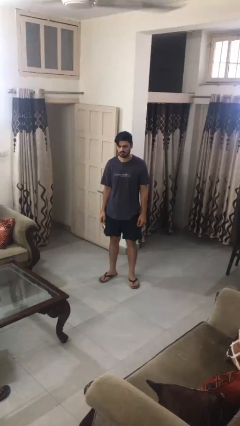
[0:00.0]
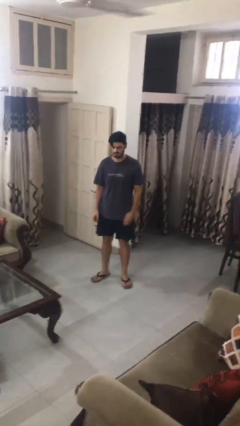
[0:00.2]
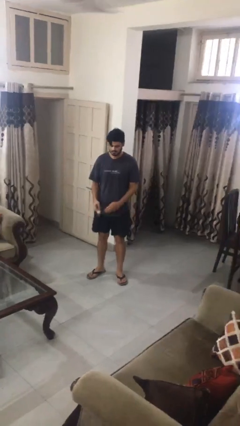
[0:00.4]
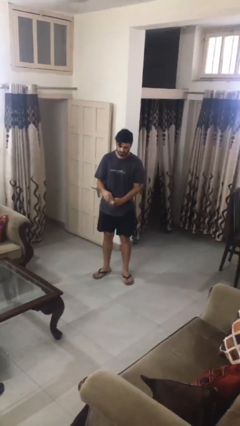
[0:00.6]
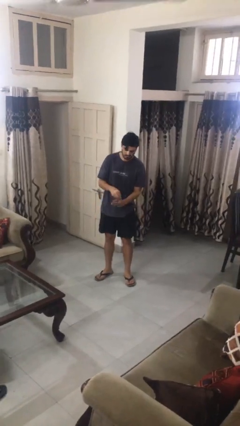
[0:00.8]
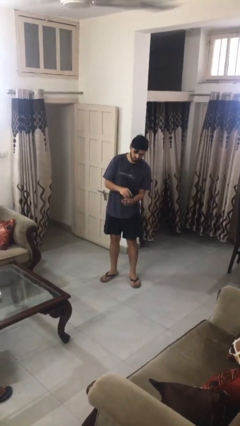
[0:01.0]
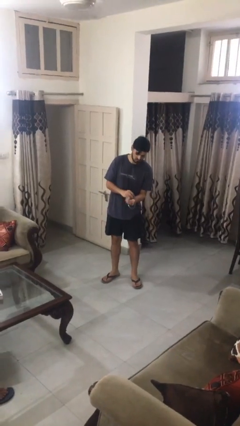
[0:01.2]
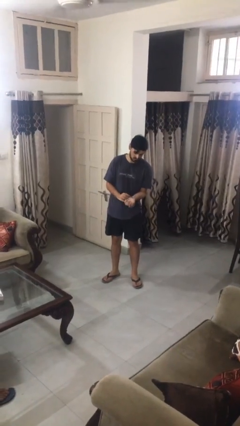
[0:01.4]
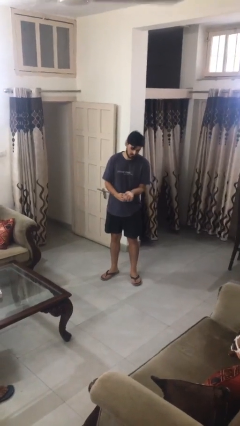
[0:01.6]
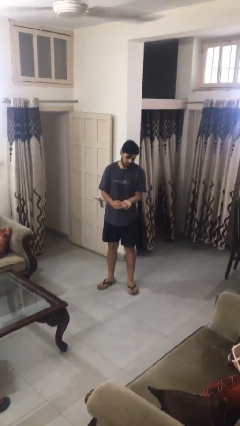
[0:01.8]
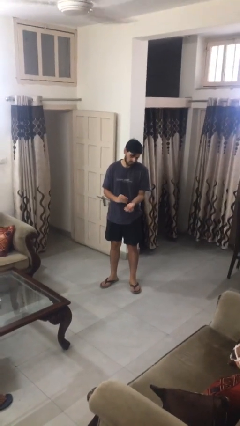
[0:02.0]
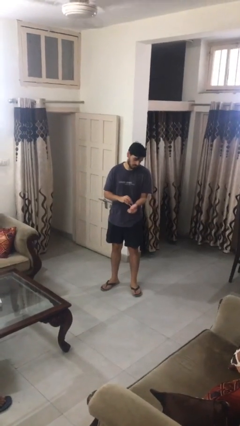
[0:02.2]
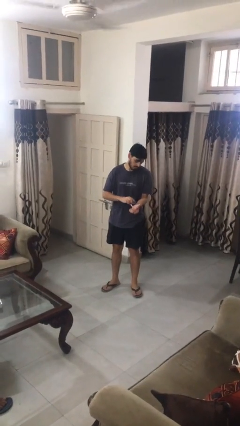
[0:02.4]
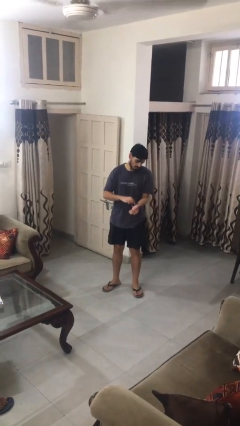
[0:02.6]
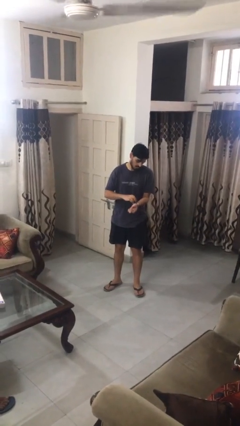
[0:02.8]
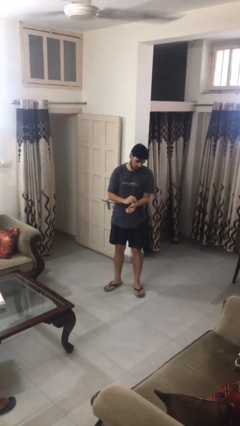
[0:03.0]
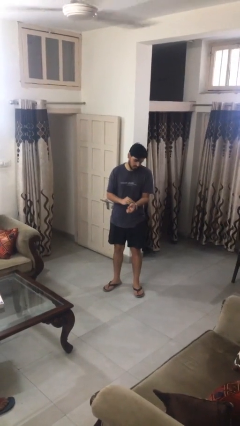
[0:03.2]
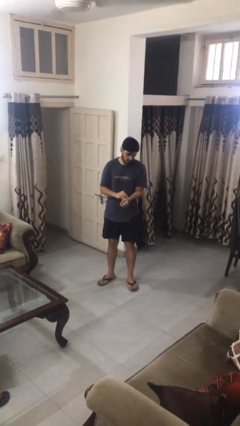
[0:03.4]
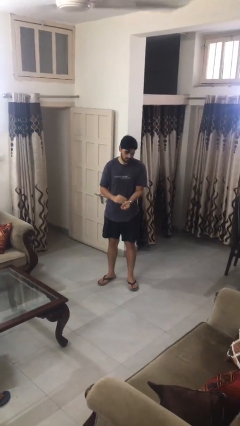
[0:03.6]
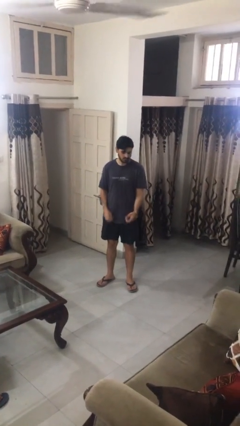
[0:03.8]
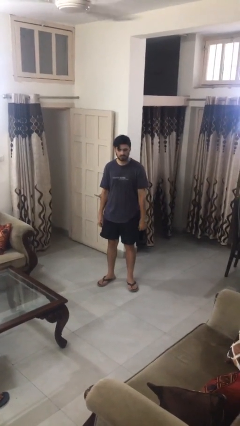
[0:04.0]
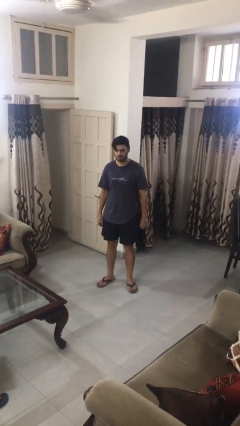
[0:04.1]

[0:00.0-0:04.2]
person puts on wristwatch

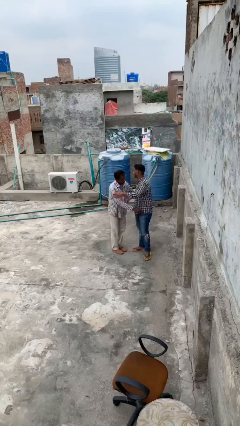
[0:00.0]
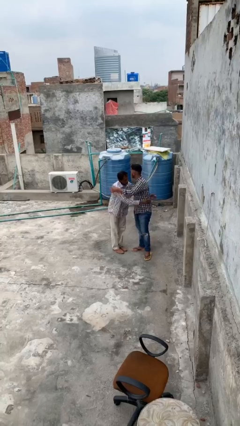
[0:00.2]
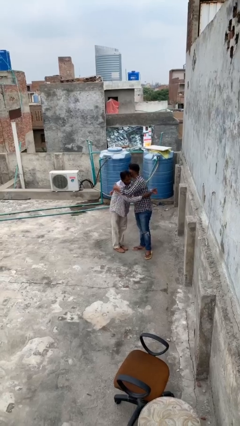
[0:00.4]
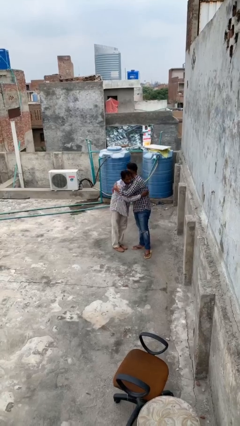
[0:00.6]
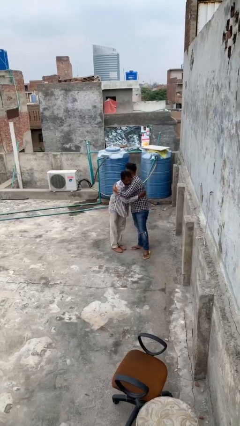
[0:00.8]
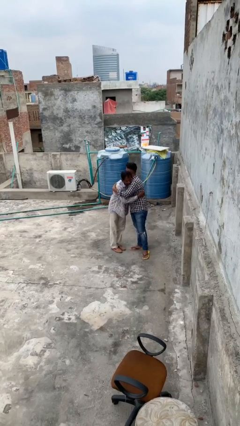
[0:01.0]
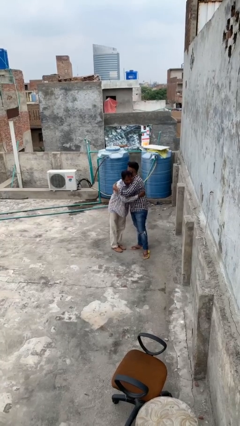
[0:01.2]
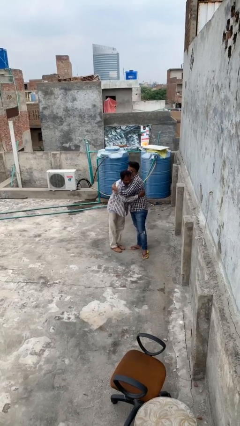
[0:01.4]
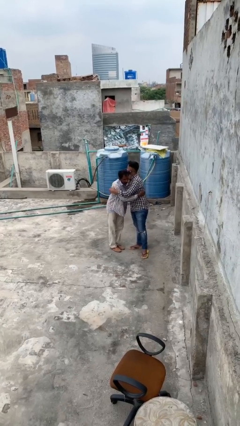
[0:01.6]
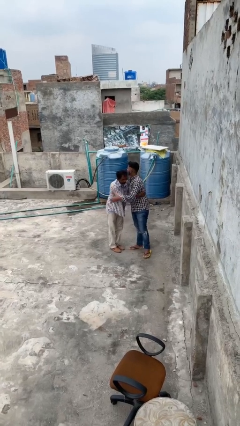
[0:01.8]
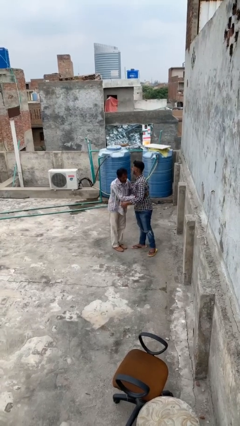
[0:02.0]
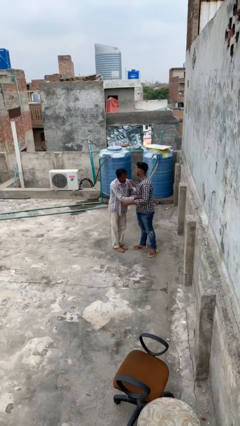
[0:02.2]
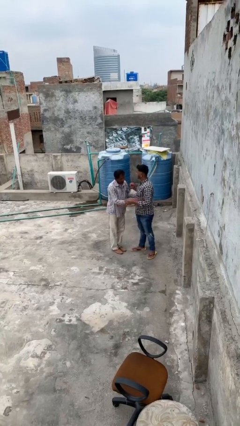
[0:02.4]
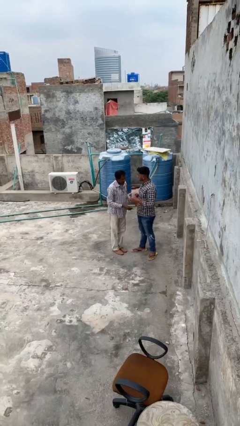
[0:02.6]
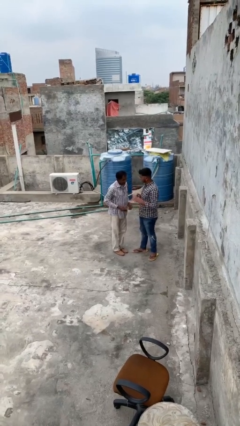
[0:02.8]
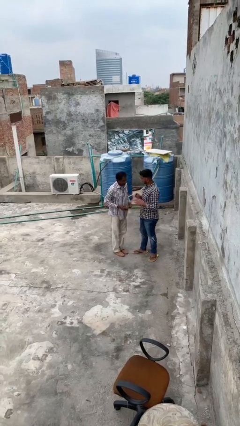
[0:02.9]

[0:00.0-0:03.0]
person embraces person

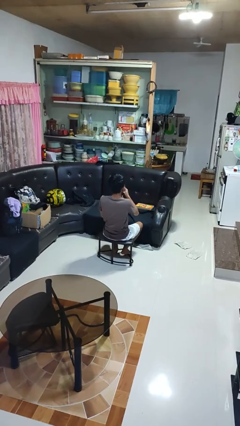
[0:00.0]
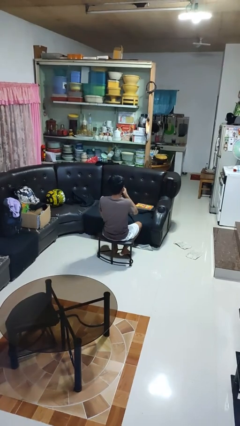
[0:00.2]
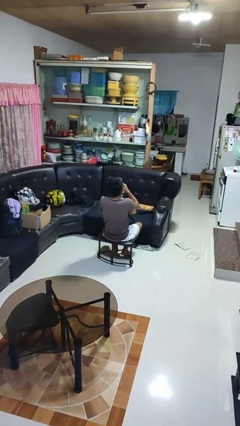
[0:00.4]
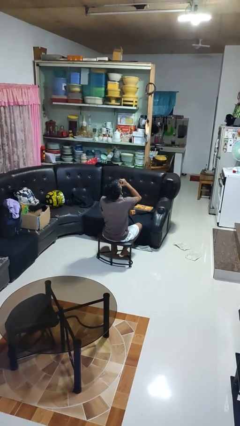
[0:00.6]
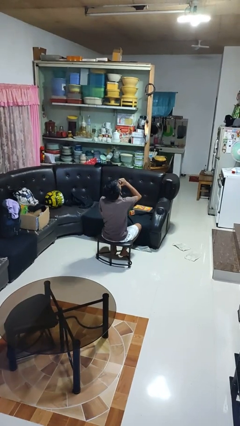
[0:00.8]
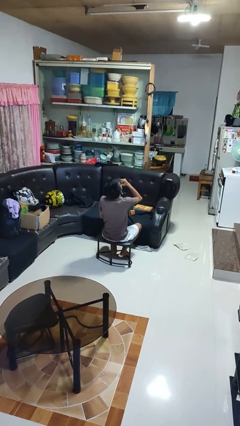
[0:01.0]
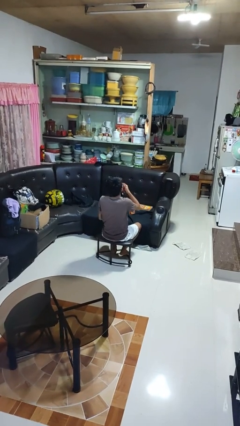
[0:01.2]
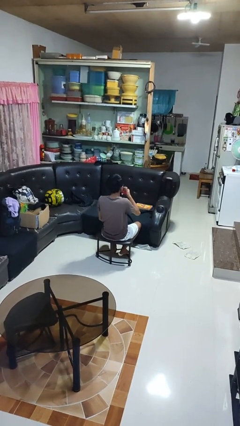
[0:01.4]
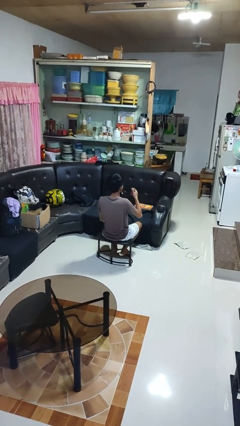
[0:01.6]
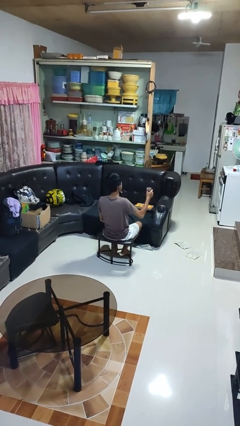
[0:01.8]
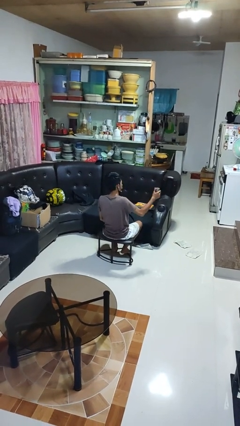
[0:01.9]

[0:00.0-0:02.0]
person drinks from beverage can

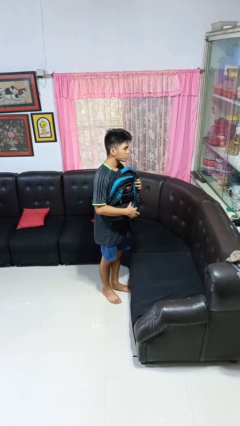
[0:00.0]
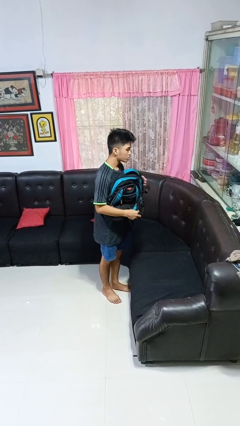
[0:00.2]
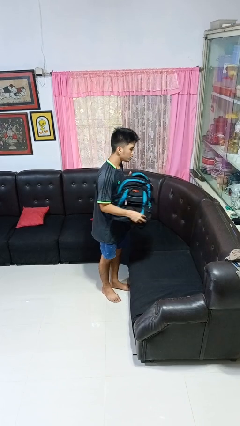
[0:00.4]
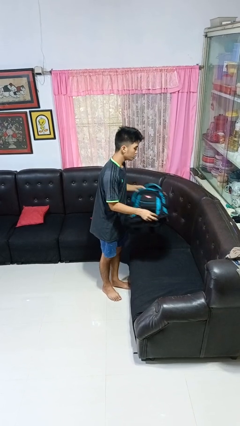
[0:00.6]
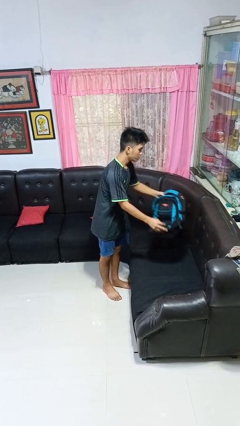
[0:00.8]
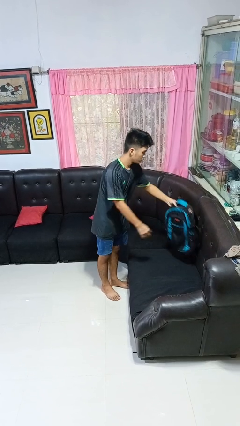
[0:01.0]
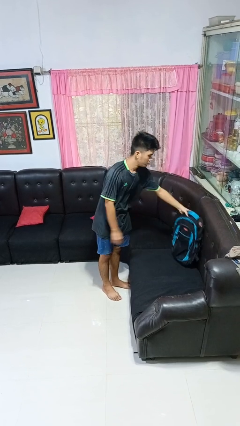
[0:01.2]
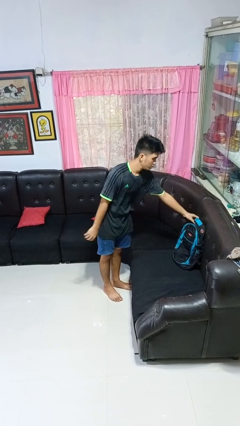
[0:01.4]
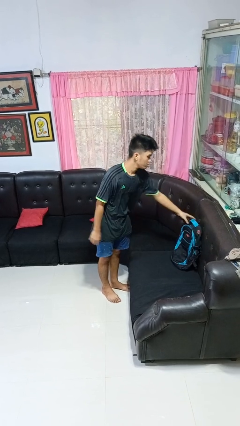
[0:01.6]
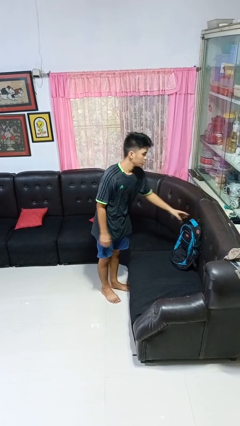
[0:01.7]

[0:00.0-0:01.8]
person puts down object on couch

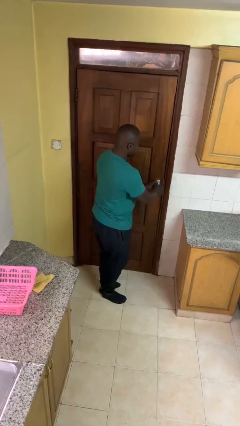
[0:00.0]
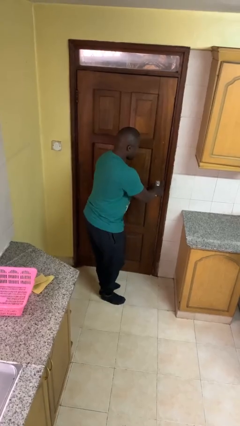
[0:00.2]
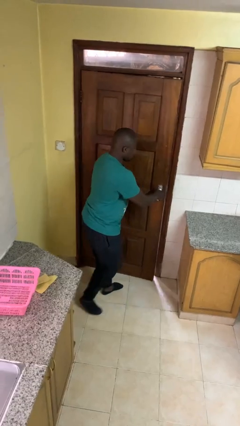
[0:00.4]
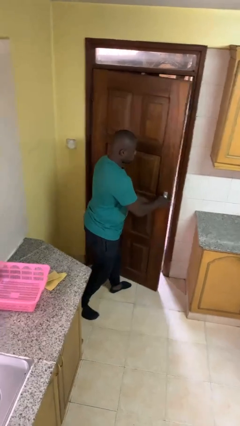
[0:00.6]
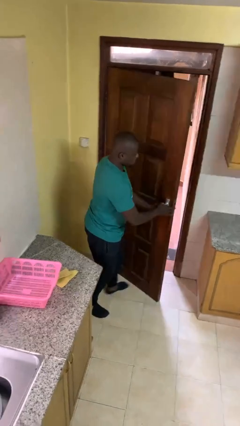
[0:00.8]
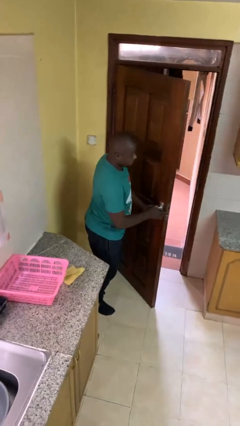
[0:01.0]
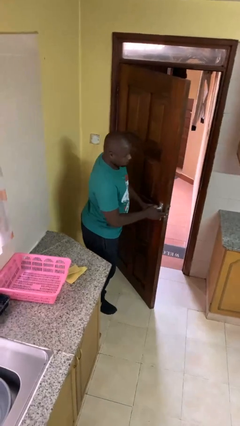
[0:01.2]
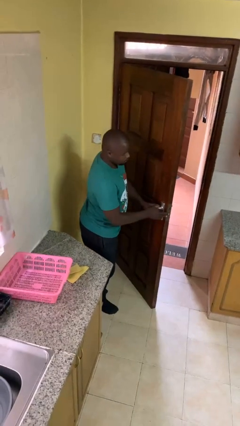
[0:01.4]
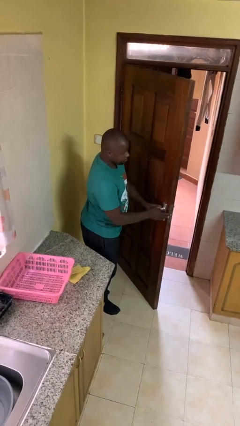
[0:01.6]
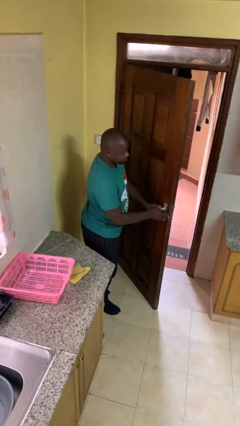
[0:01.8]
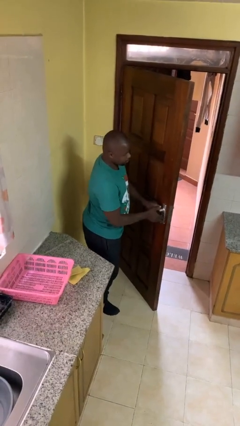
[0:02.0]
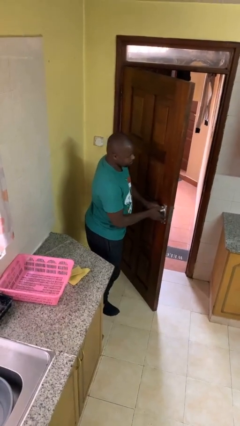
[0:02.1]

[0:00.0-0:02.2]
person opens facility door

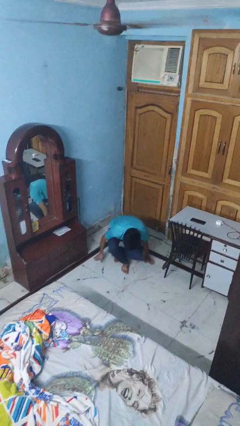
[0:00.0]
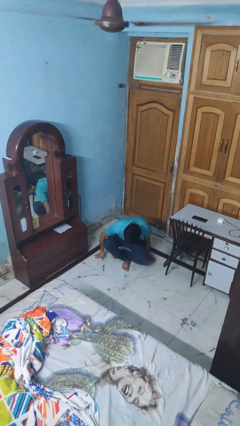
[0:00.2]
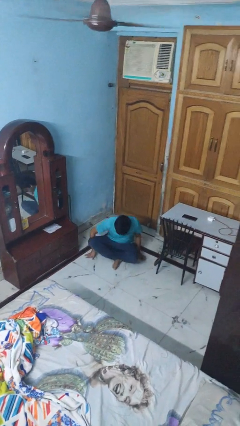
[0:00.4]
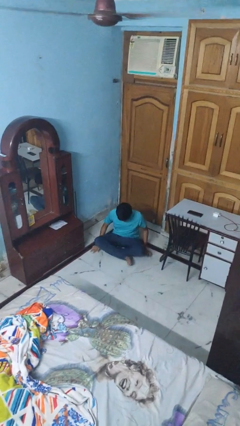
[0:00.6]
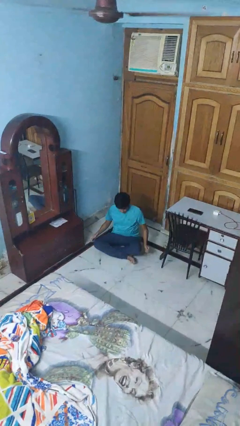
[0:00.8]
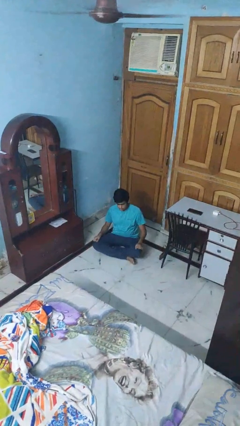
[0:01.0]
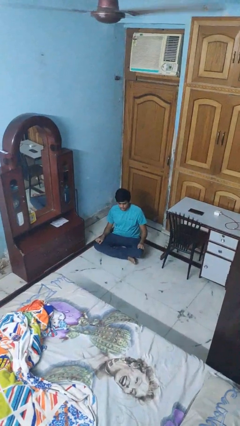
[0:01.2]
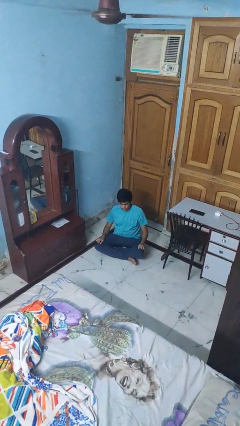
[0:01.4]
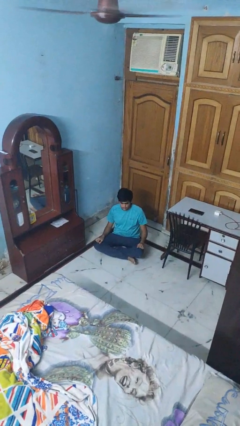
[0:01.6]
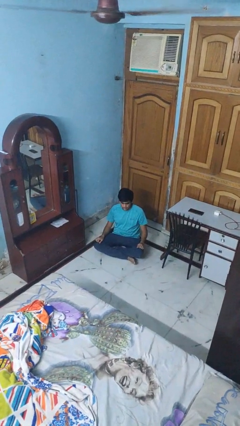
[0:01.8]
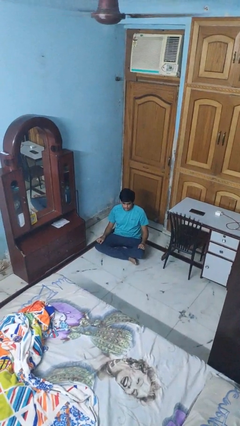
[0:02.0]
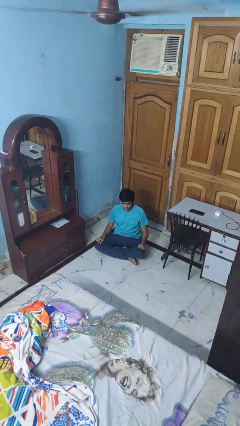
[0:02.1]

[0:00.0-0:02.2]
person sits crisscross

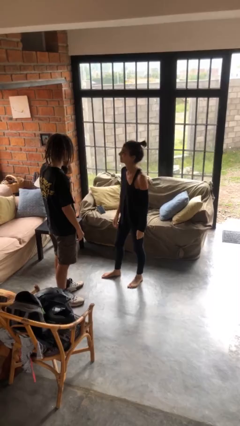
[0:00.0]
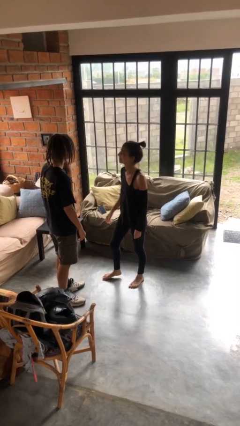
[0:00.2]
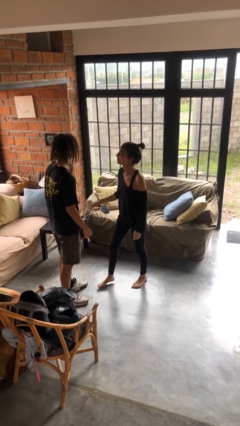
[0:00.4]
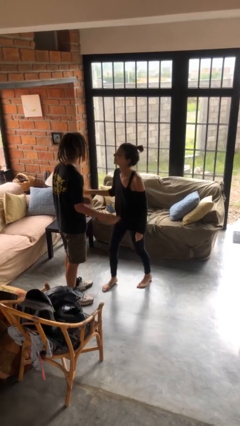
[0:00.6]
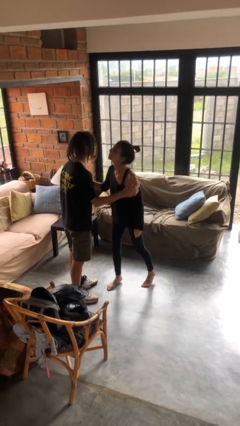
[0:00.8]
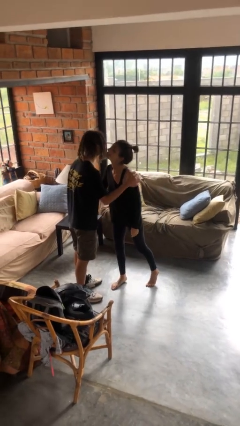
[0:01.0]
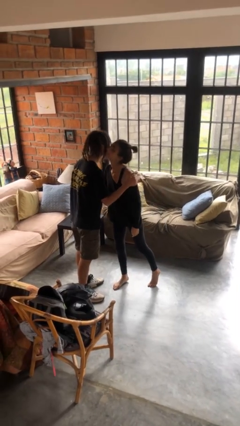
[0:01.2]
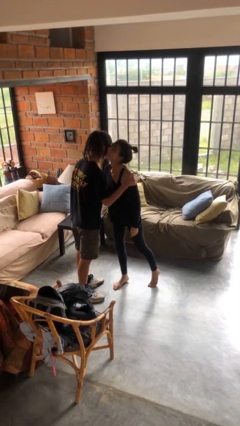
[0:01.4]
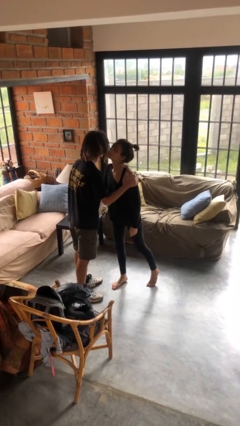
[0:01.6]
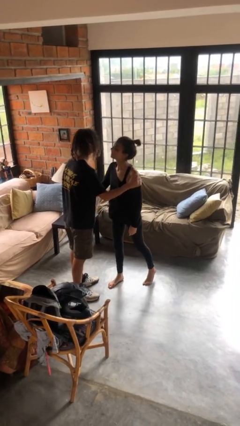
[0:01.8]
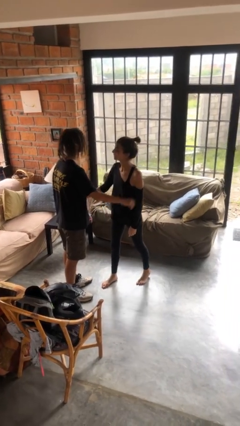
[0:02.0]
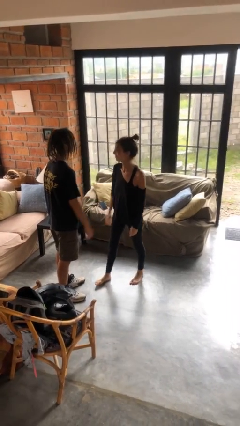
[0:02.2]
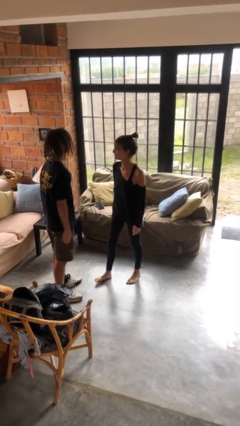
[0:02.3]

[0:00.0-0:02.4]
person kisses cheek of person
